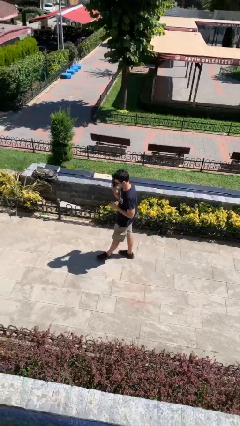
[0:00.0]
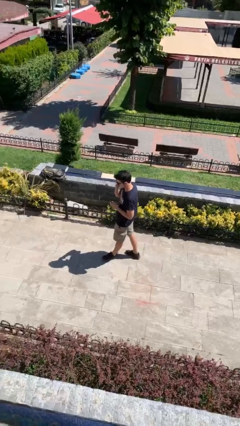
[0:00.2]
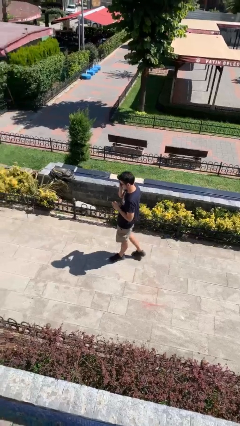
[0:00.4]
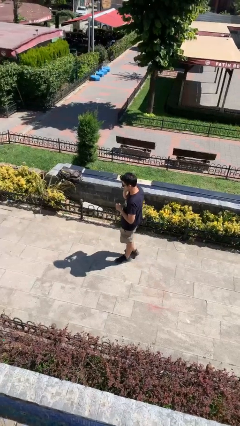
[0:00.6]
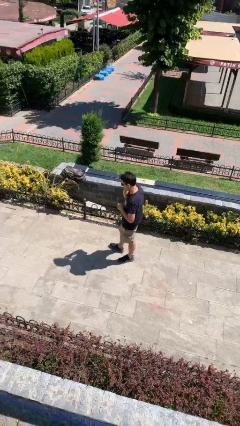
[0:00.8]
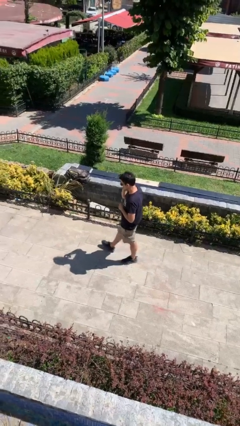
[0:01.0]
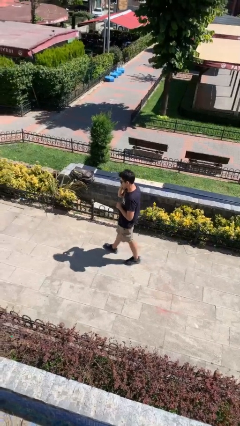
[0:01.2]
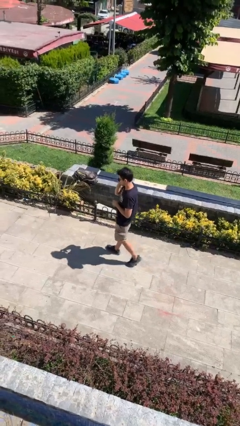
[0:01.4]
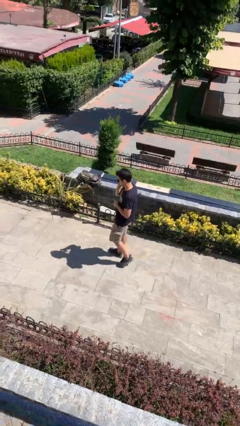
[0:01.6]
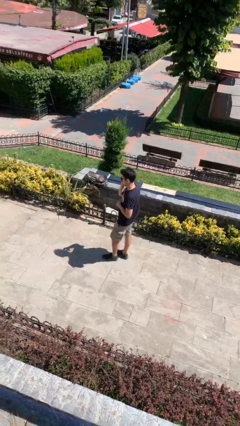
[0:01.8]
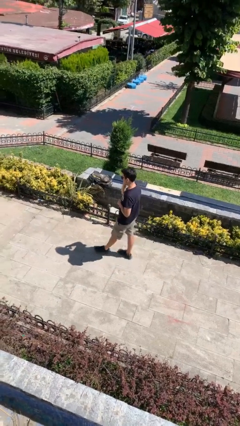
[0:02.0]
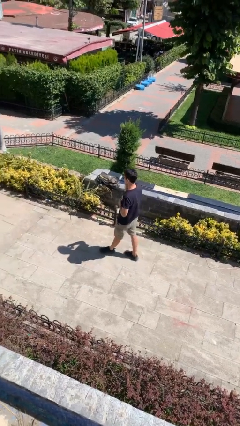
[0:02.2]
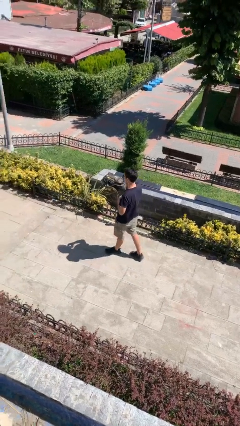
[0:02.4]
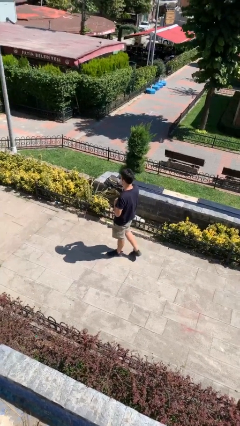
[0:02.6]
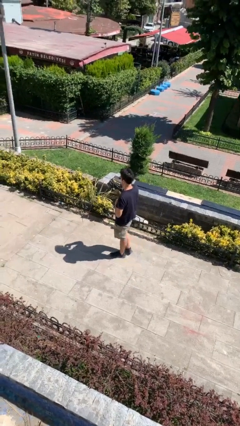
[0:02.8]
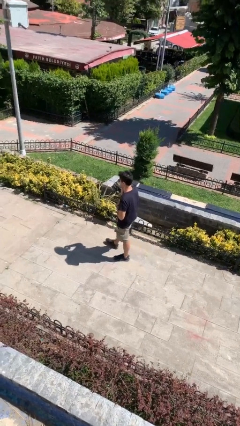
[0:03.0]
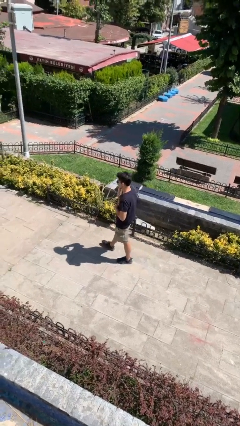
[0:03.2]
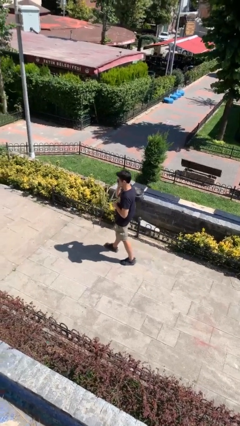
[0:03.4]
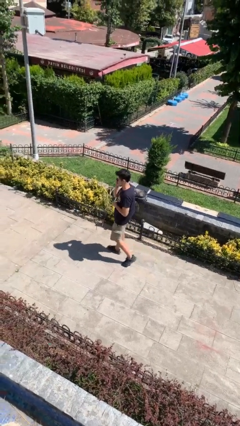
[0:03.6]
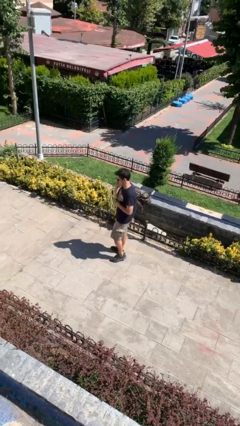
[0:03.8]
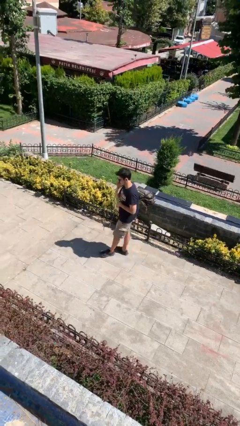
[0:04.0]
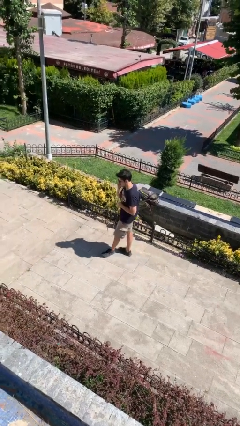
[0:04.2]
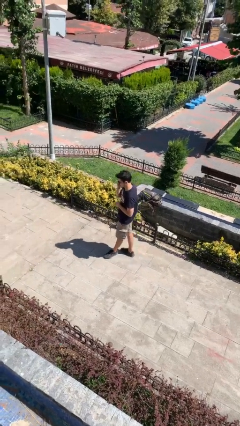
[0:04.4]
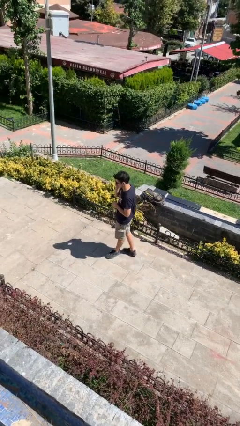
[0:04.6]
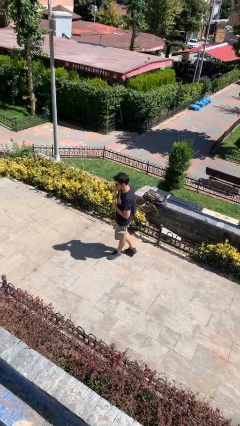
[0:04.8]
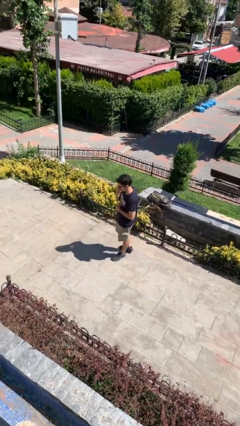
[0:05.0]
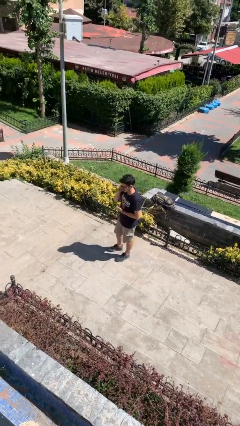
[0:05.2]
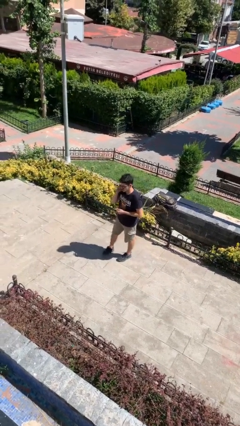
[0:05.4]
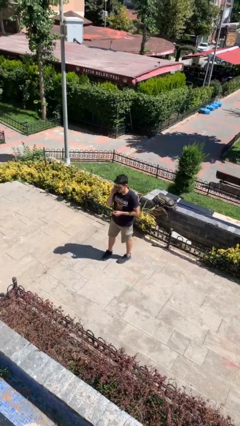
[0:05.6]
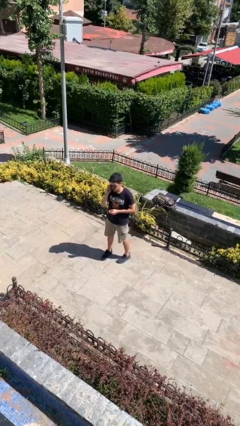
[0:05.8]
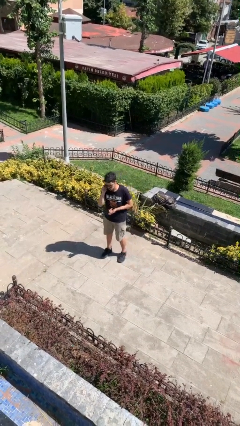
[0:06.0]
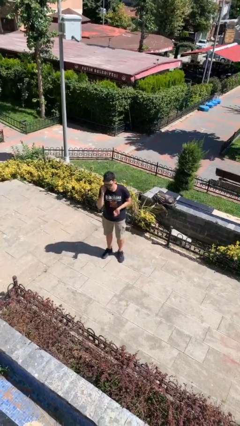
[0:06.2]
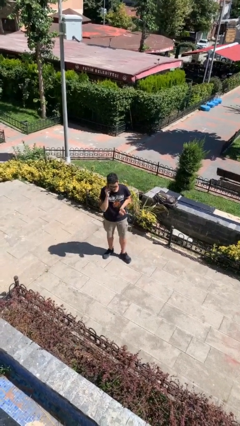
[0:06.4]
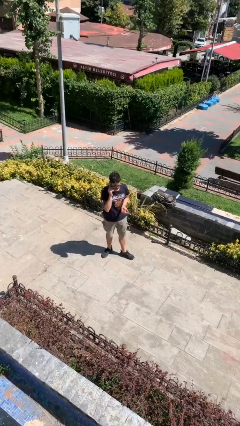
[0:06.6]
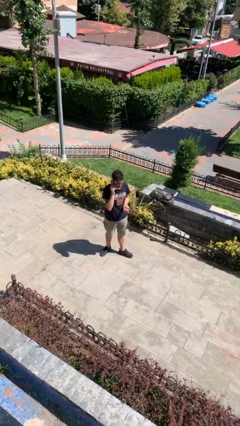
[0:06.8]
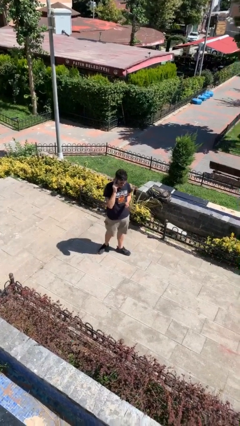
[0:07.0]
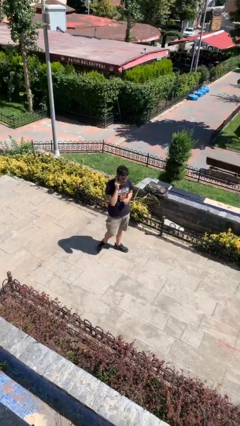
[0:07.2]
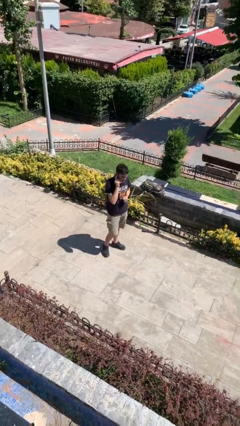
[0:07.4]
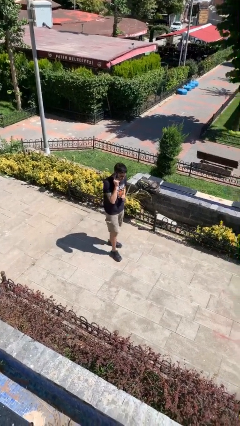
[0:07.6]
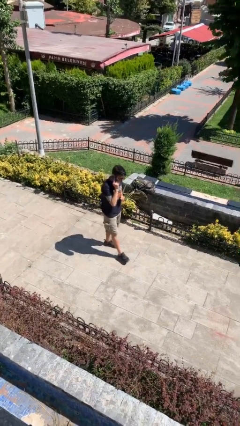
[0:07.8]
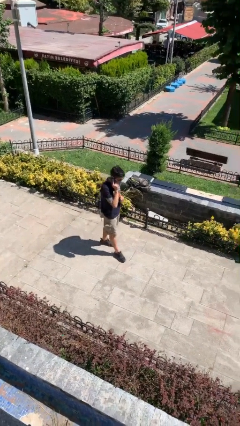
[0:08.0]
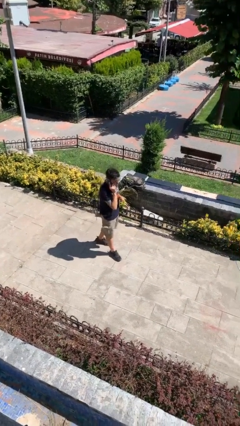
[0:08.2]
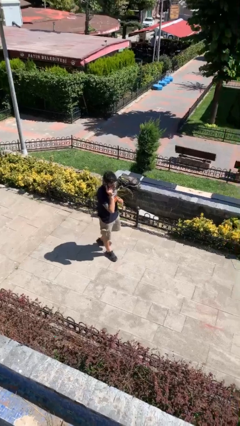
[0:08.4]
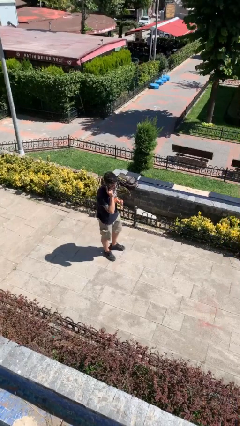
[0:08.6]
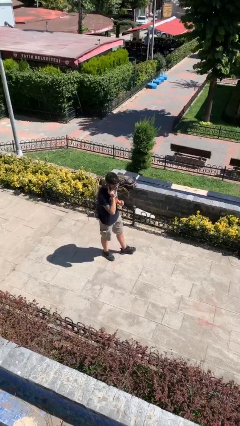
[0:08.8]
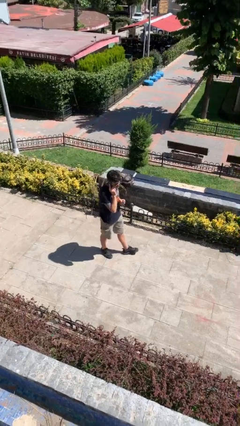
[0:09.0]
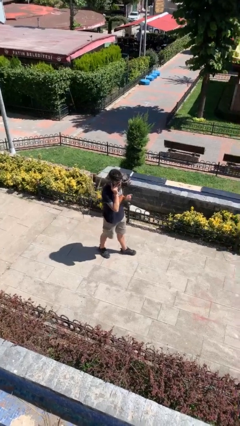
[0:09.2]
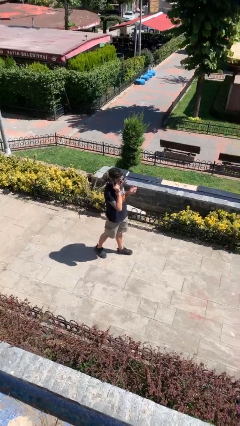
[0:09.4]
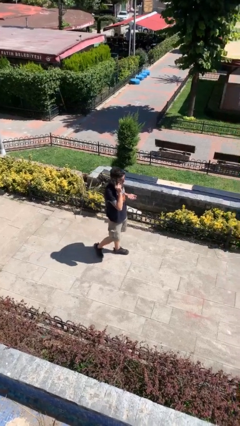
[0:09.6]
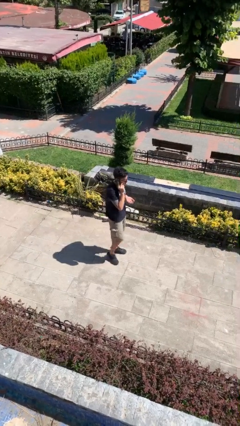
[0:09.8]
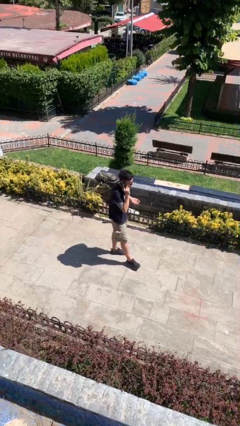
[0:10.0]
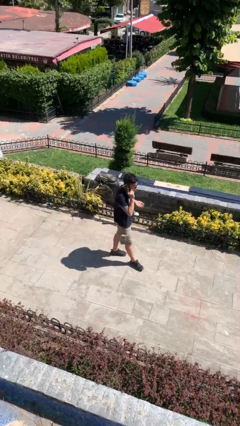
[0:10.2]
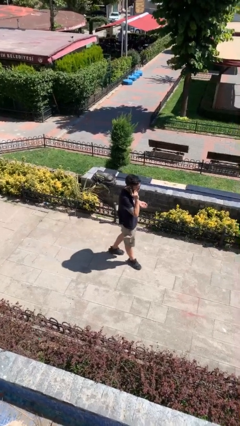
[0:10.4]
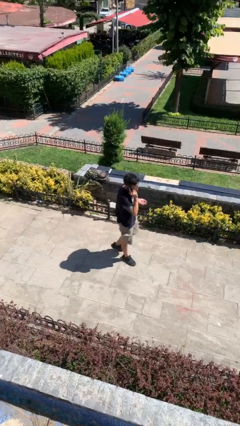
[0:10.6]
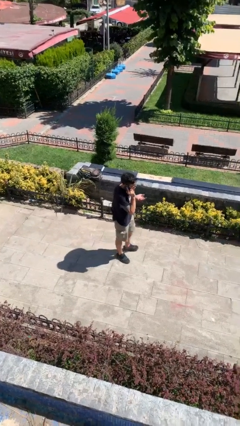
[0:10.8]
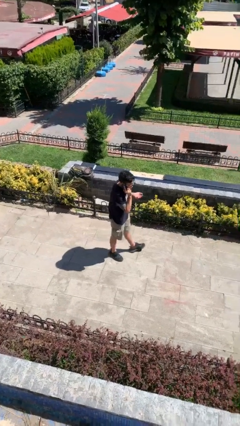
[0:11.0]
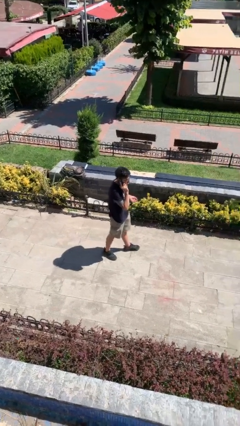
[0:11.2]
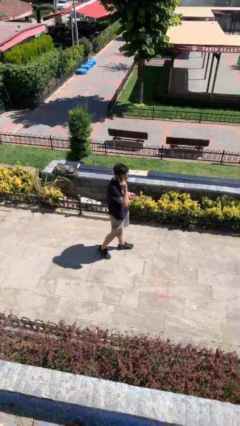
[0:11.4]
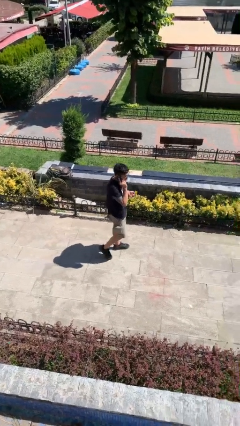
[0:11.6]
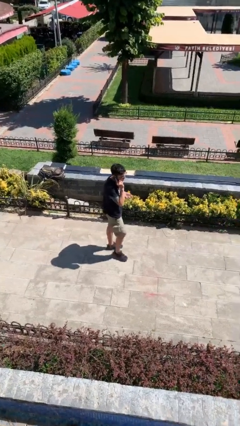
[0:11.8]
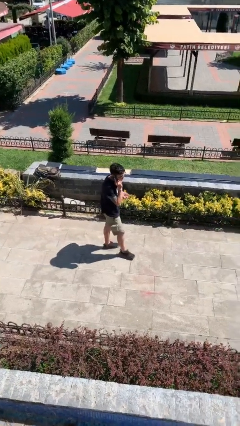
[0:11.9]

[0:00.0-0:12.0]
person talks on phone

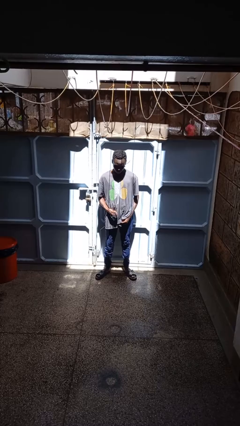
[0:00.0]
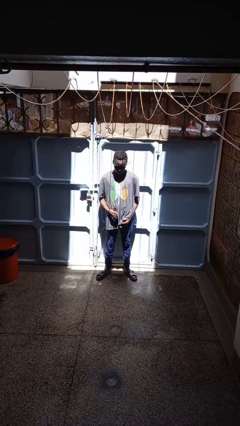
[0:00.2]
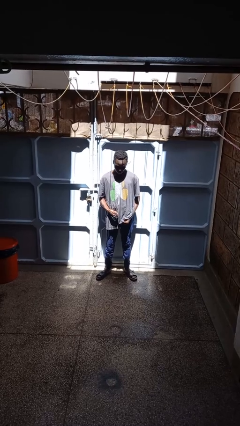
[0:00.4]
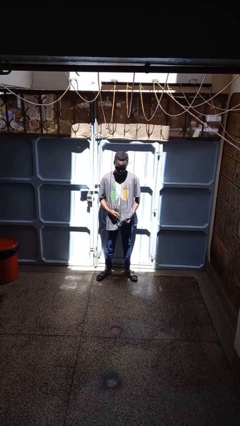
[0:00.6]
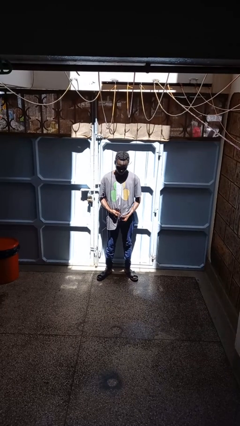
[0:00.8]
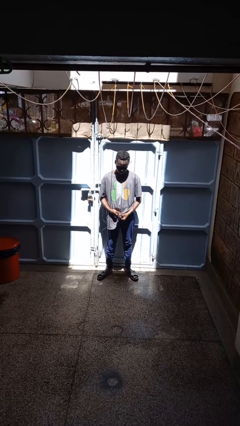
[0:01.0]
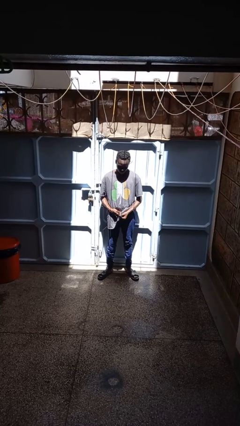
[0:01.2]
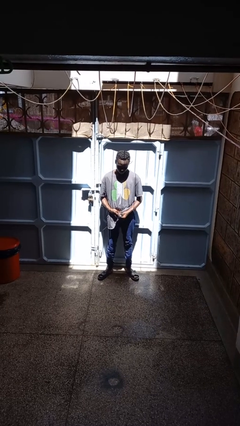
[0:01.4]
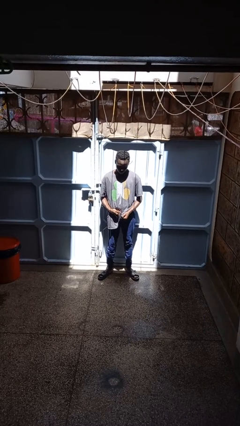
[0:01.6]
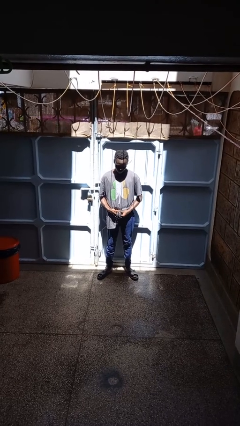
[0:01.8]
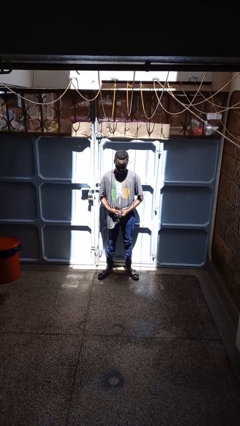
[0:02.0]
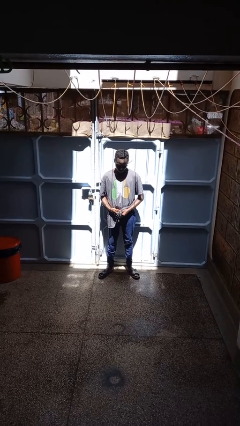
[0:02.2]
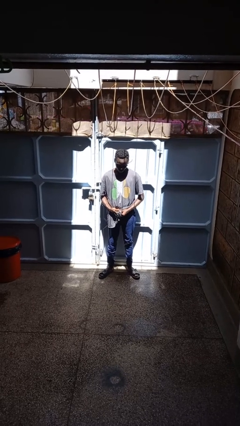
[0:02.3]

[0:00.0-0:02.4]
person cleans eyeglasses

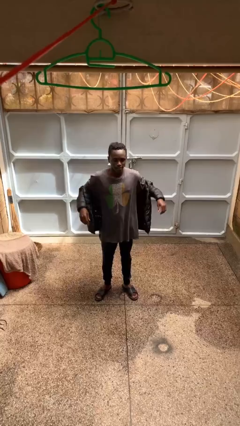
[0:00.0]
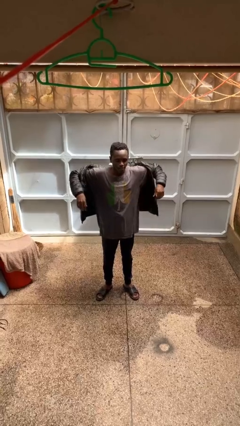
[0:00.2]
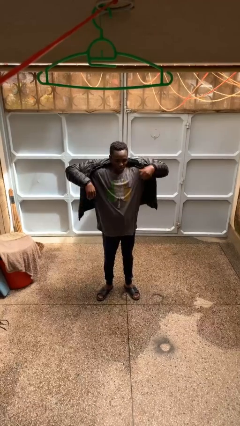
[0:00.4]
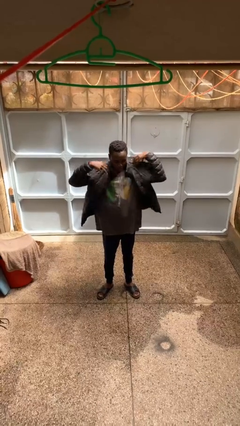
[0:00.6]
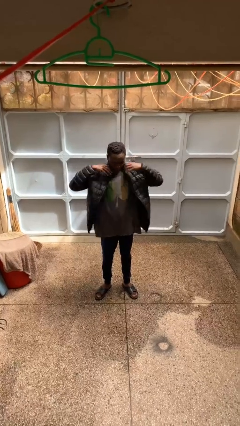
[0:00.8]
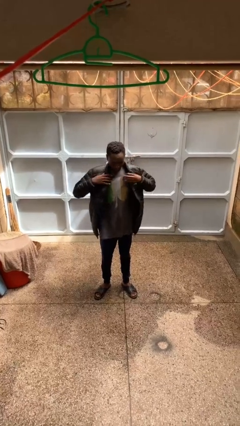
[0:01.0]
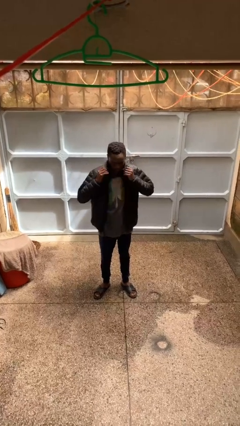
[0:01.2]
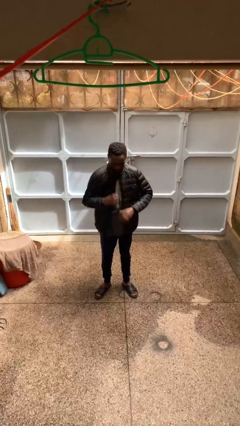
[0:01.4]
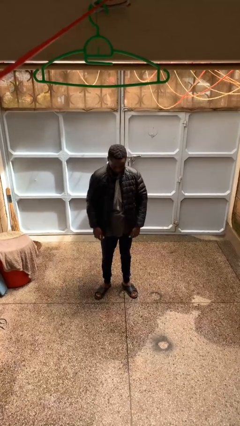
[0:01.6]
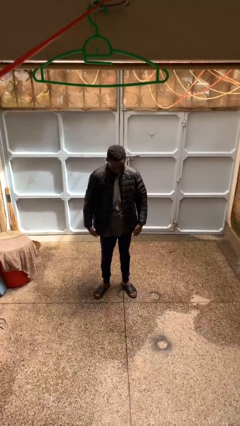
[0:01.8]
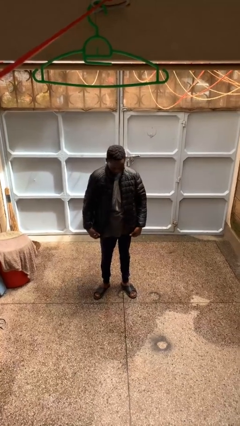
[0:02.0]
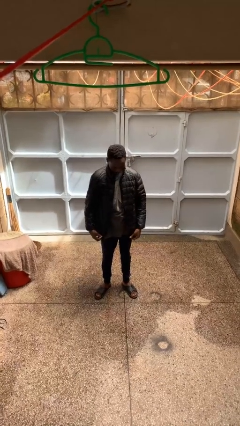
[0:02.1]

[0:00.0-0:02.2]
person puts on jacket

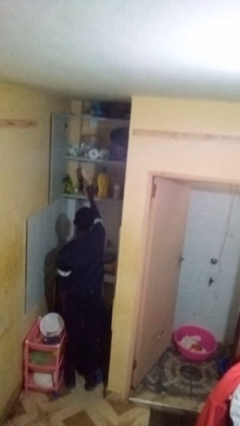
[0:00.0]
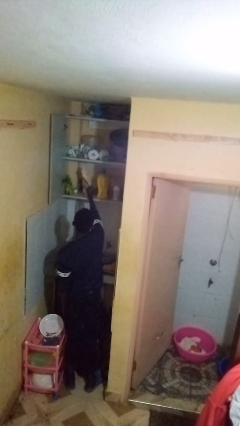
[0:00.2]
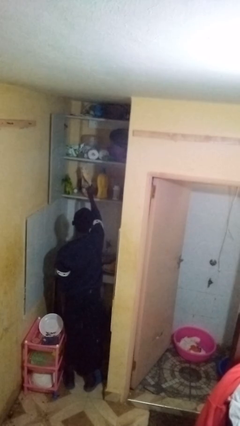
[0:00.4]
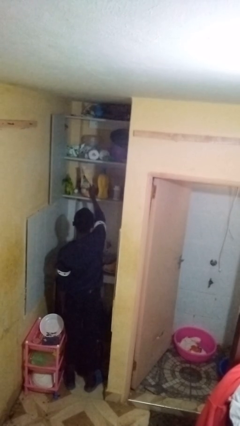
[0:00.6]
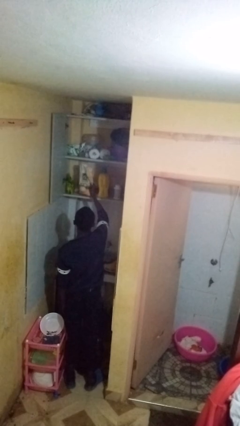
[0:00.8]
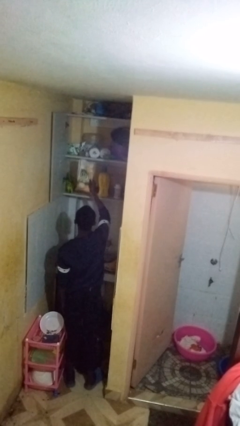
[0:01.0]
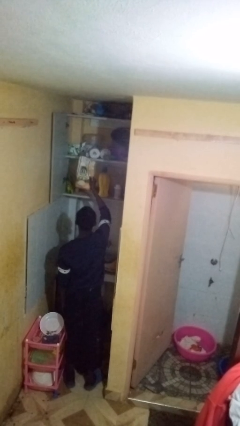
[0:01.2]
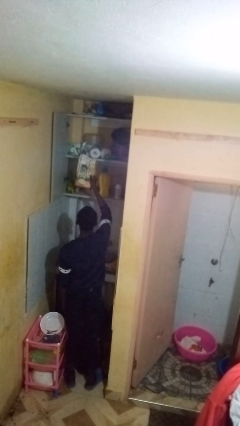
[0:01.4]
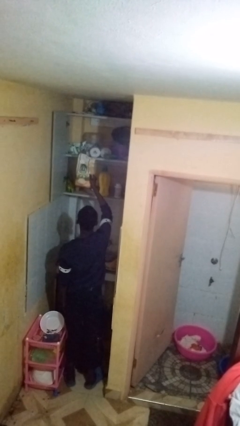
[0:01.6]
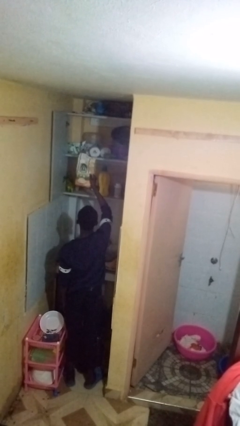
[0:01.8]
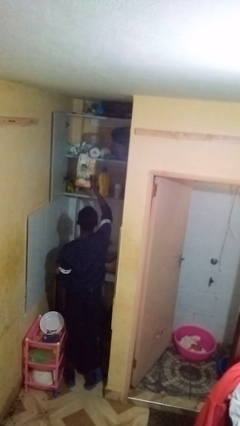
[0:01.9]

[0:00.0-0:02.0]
person takes object from cabinet
